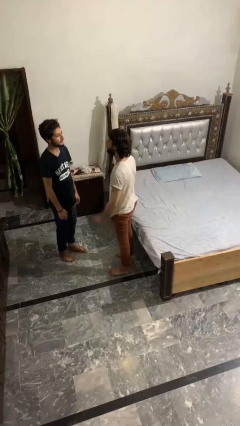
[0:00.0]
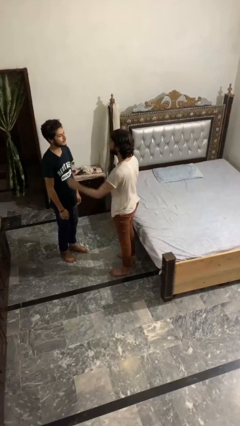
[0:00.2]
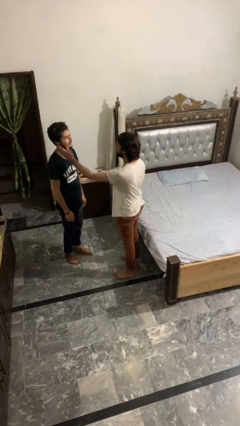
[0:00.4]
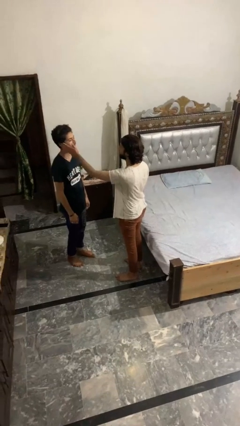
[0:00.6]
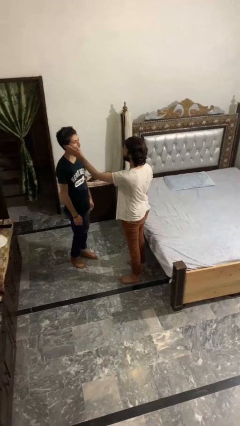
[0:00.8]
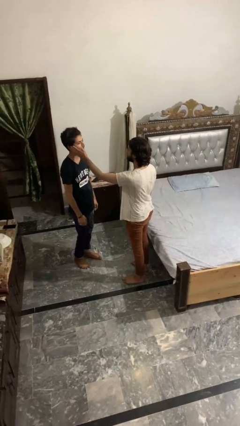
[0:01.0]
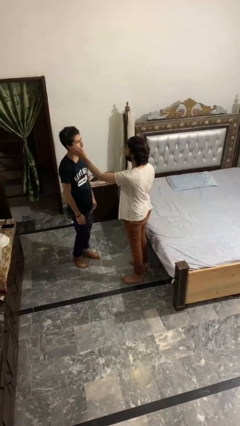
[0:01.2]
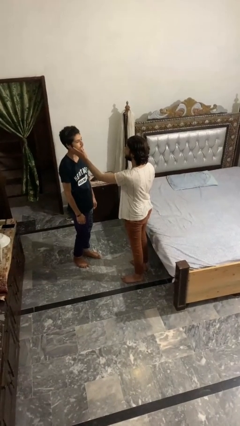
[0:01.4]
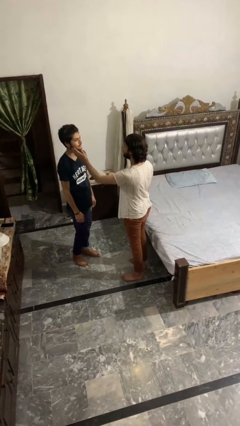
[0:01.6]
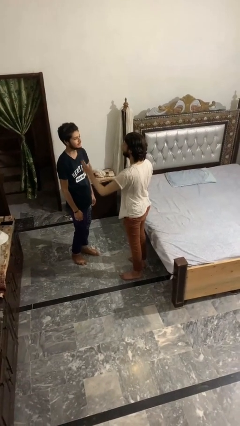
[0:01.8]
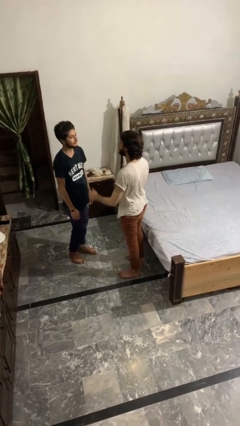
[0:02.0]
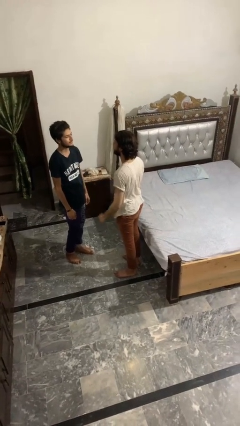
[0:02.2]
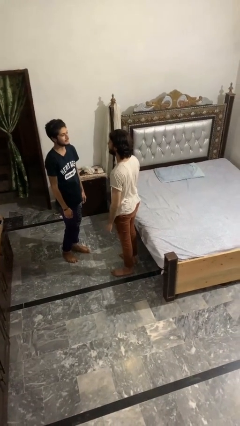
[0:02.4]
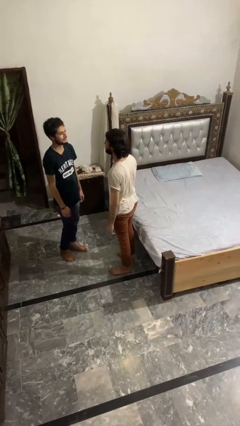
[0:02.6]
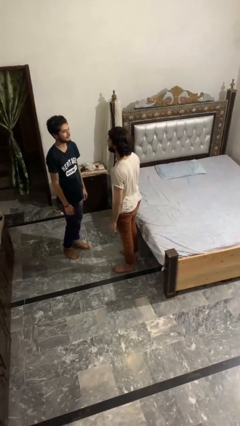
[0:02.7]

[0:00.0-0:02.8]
person touches face of person

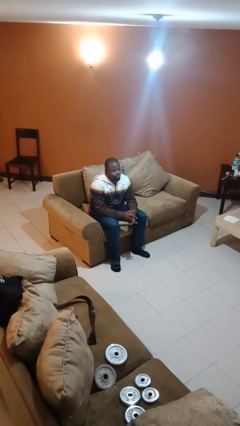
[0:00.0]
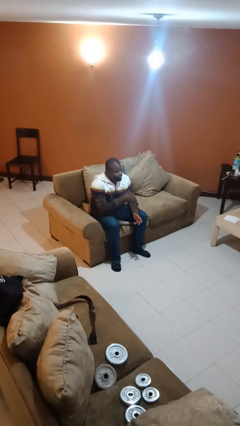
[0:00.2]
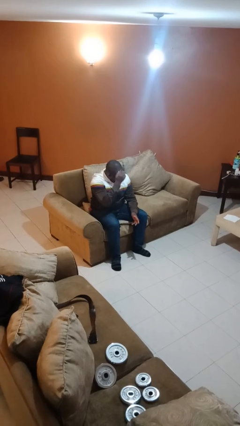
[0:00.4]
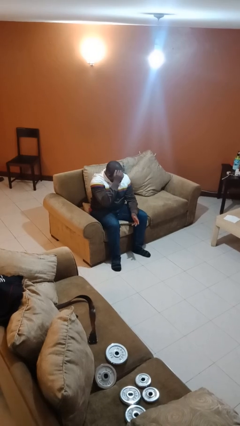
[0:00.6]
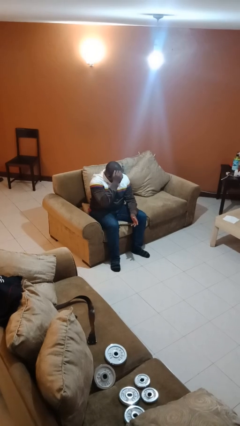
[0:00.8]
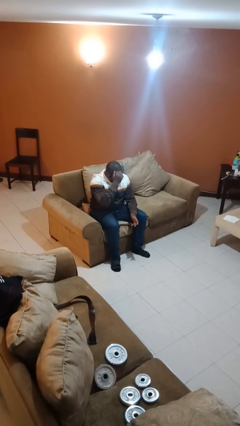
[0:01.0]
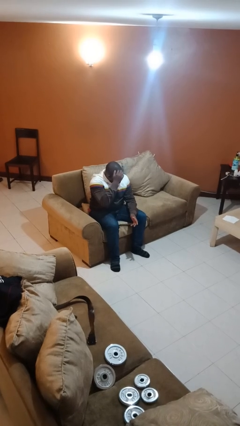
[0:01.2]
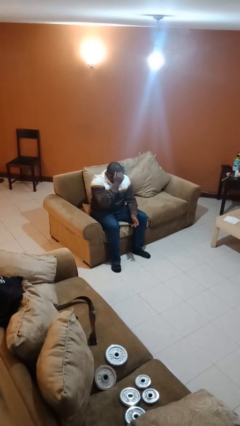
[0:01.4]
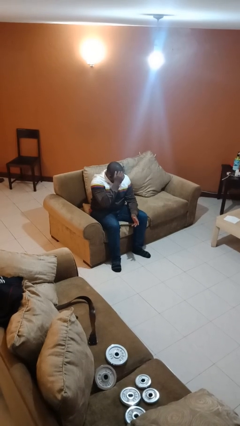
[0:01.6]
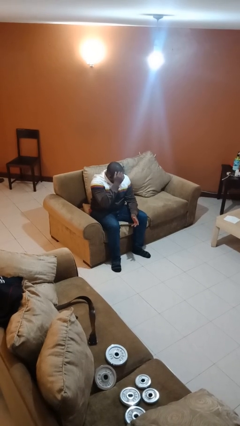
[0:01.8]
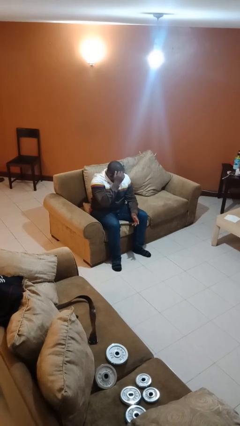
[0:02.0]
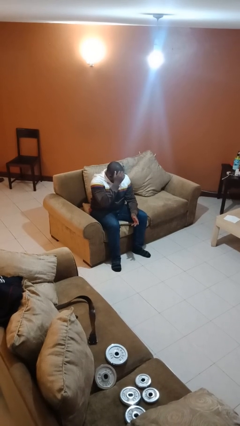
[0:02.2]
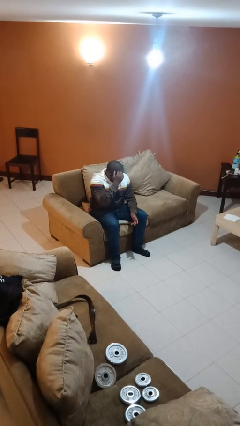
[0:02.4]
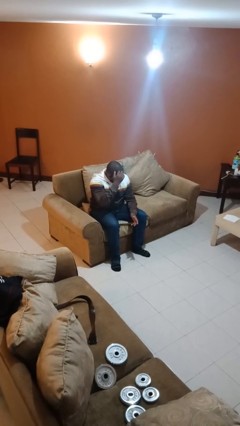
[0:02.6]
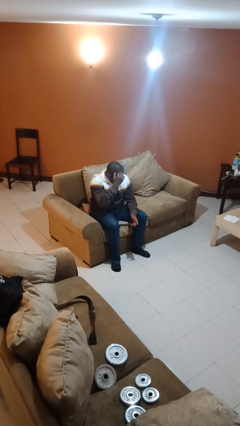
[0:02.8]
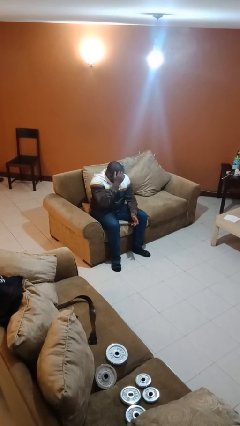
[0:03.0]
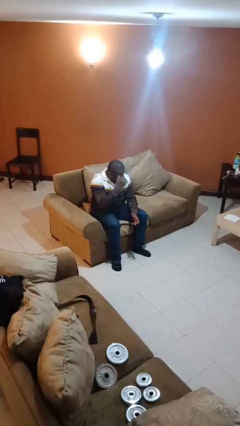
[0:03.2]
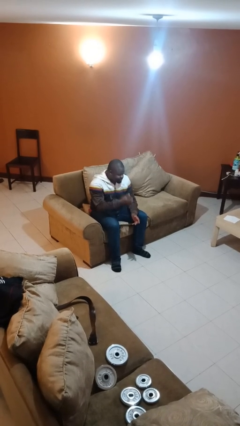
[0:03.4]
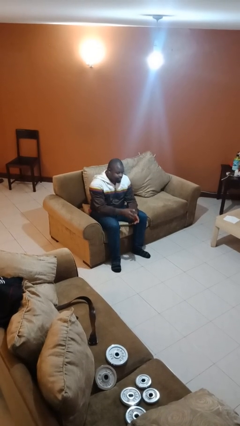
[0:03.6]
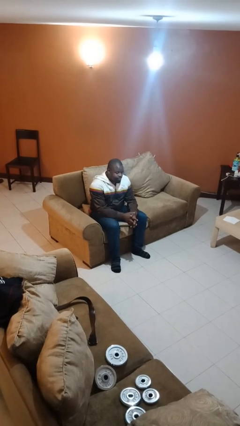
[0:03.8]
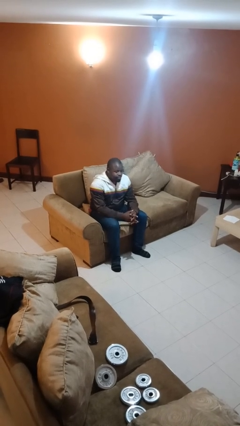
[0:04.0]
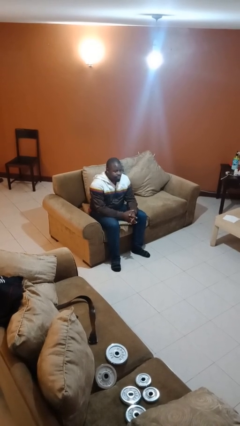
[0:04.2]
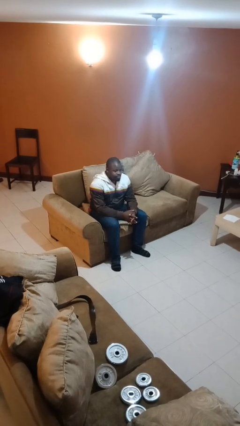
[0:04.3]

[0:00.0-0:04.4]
person scratches face

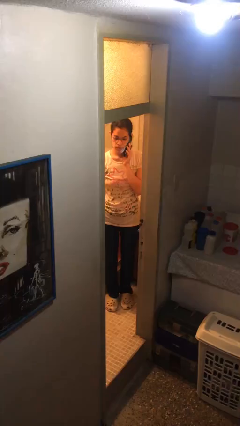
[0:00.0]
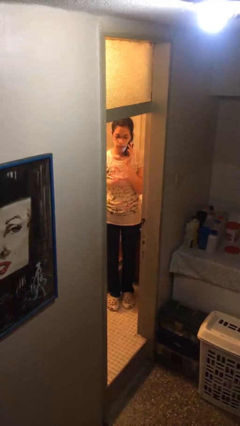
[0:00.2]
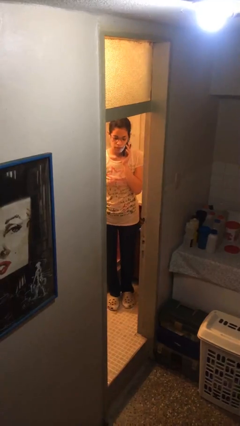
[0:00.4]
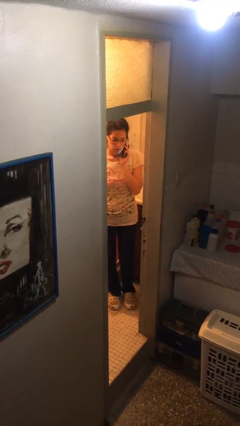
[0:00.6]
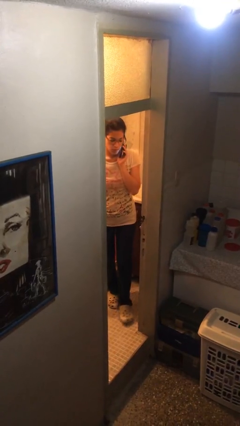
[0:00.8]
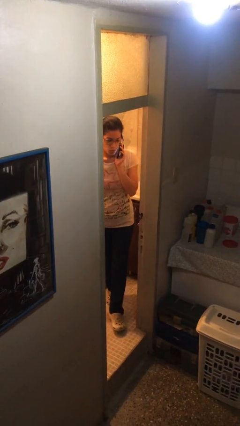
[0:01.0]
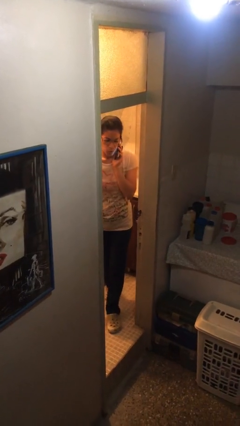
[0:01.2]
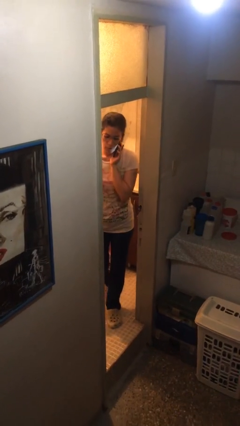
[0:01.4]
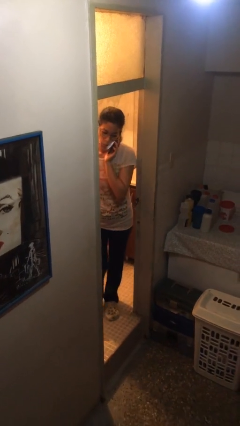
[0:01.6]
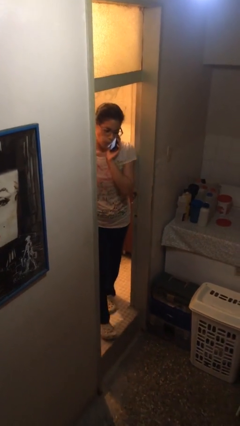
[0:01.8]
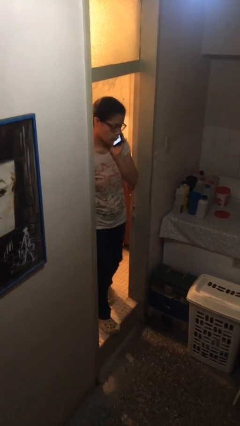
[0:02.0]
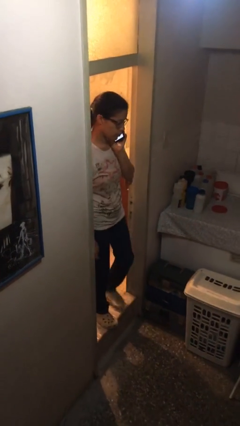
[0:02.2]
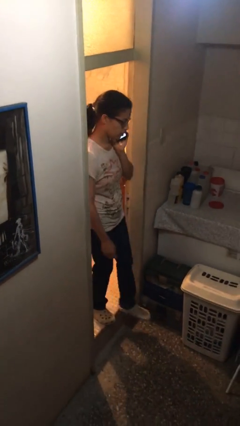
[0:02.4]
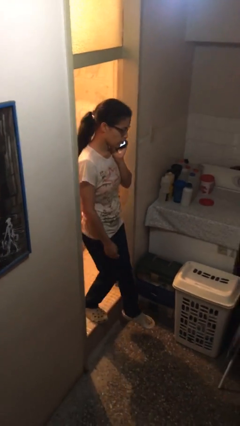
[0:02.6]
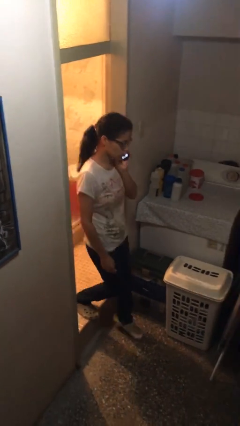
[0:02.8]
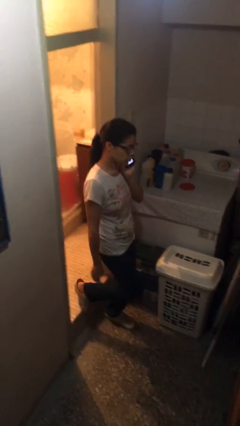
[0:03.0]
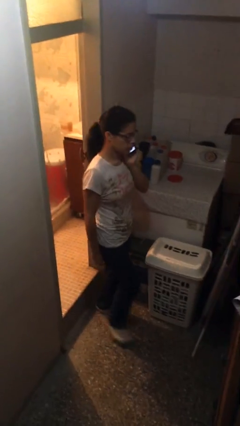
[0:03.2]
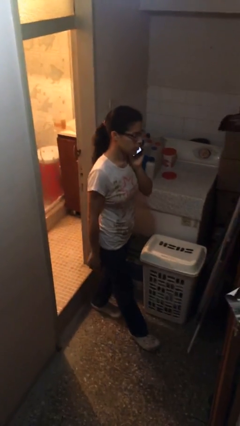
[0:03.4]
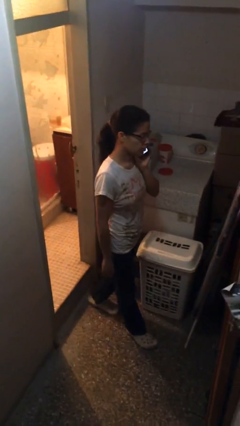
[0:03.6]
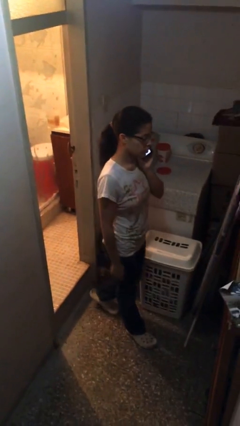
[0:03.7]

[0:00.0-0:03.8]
person enters scene through structure

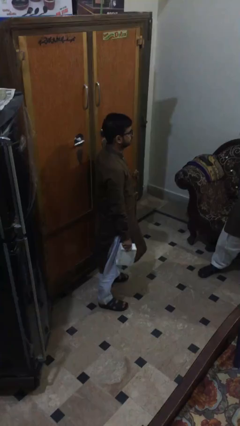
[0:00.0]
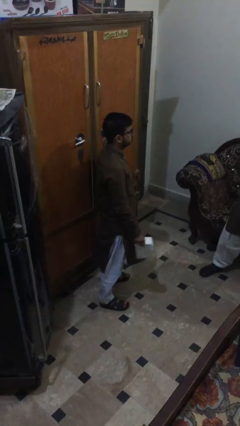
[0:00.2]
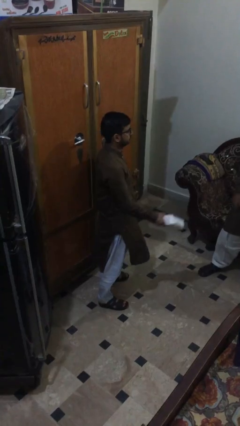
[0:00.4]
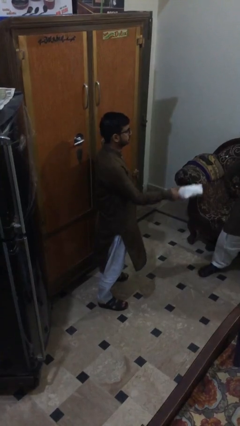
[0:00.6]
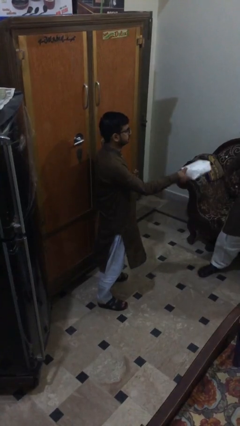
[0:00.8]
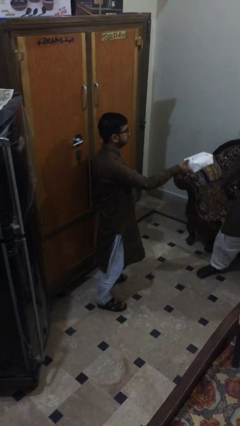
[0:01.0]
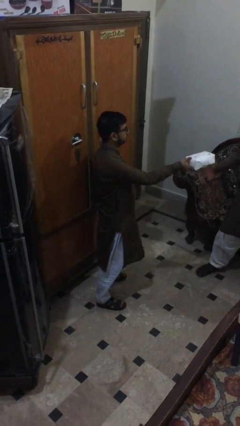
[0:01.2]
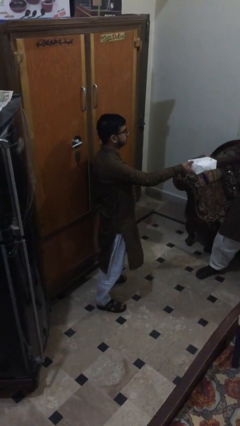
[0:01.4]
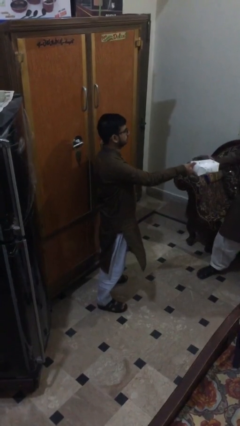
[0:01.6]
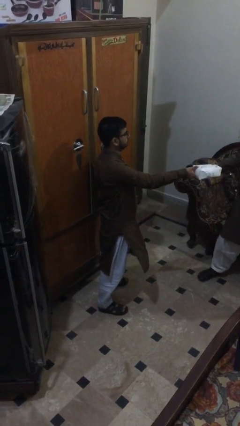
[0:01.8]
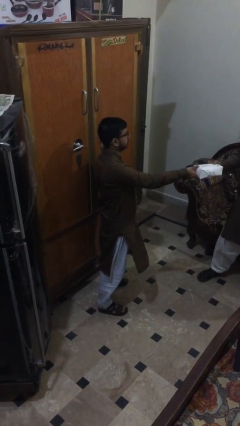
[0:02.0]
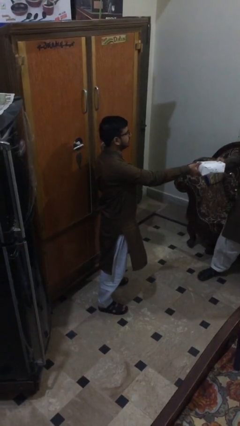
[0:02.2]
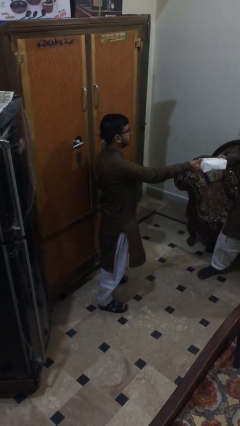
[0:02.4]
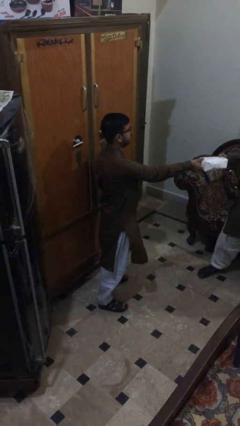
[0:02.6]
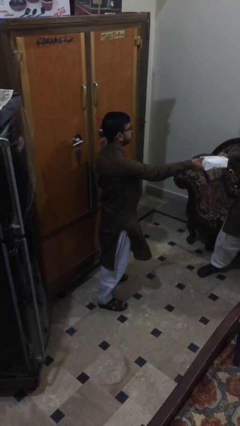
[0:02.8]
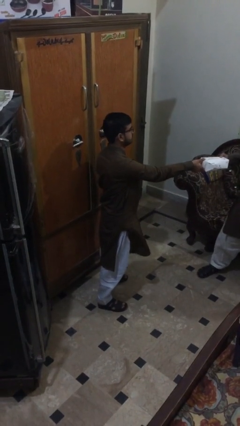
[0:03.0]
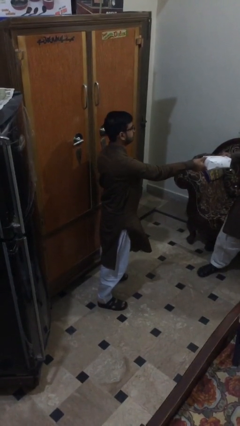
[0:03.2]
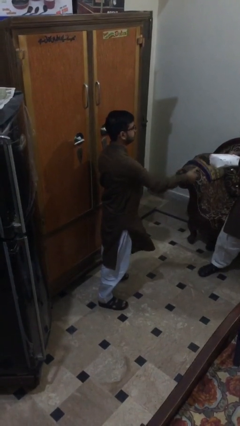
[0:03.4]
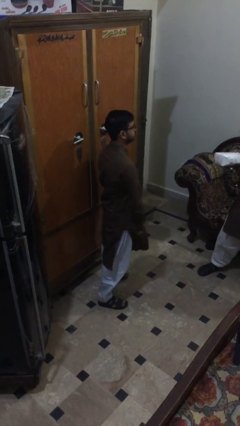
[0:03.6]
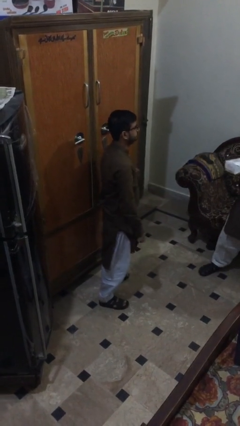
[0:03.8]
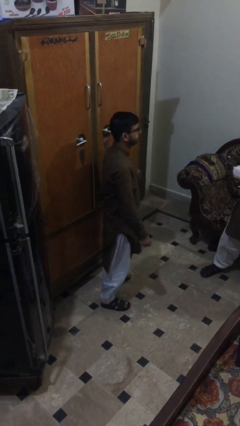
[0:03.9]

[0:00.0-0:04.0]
person transfers object to person

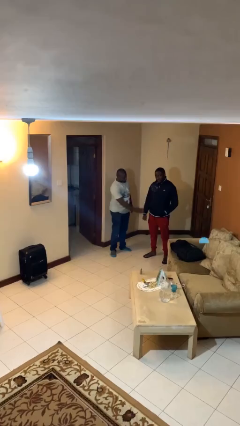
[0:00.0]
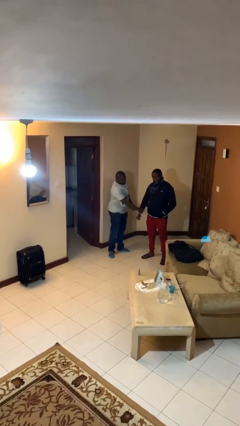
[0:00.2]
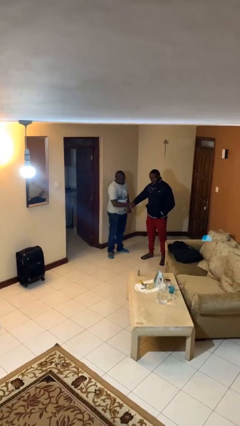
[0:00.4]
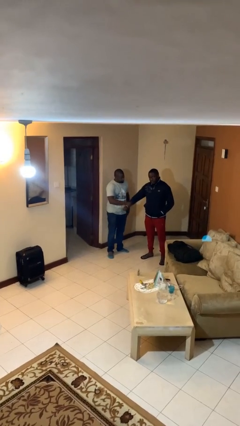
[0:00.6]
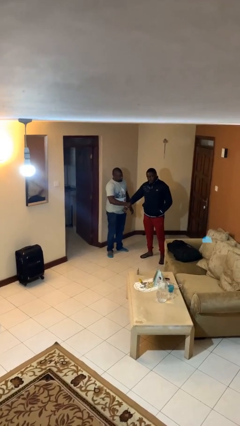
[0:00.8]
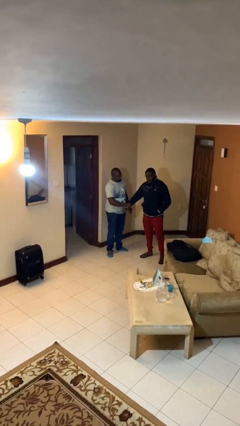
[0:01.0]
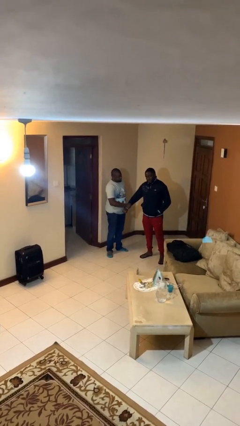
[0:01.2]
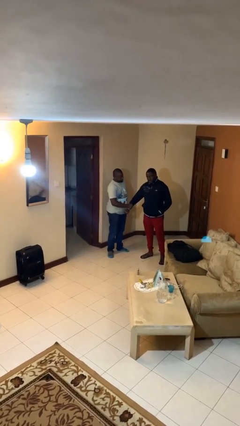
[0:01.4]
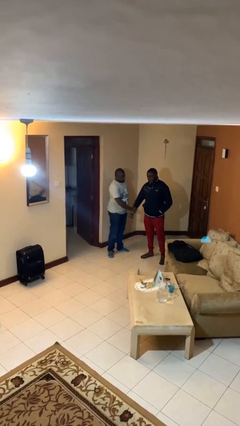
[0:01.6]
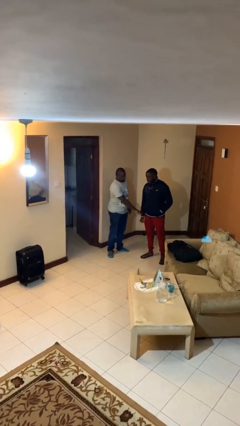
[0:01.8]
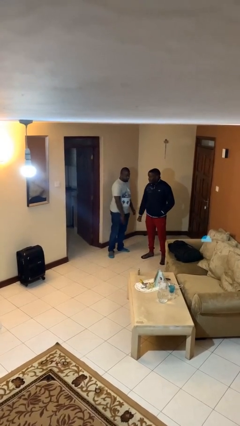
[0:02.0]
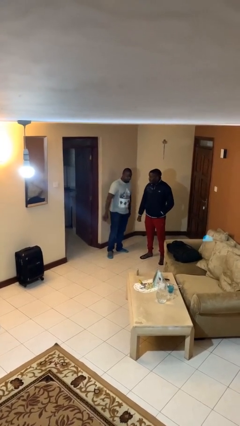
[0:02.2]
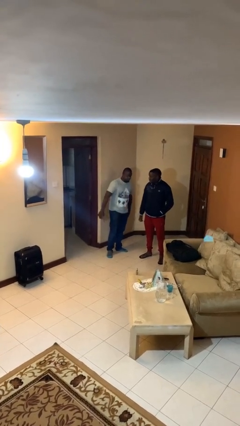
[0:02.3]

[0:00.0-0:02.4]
person grabs person by forearm
